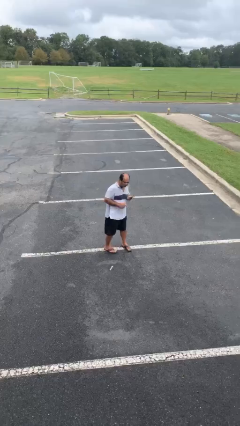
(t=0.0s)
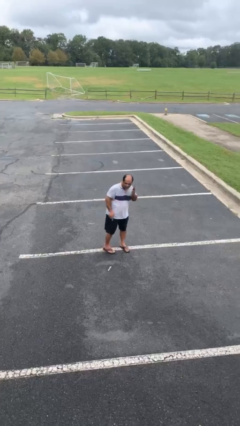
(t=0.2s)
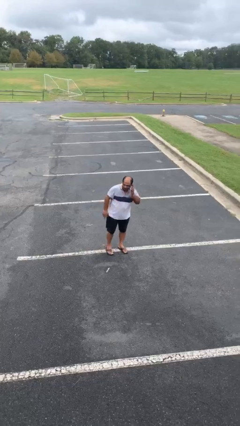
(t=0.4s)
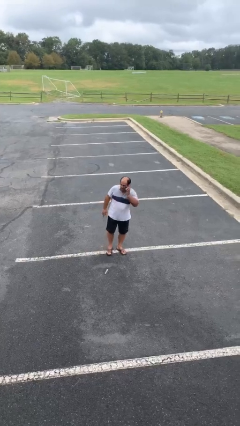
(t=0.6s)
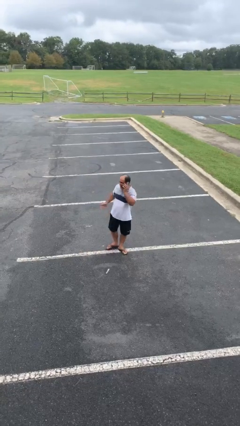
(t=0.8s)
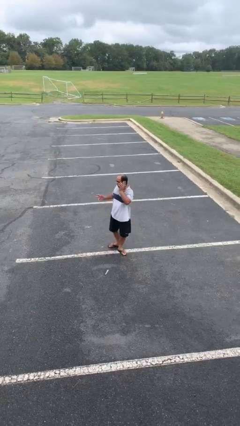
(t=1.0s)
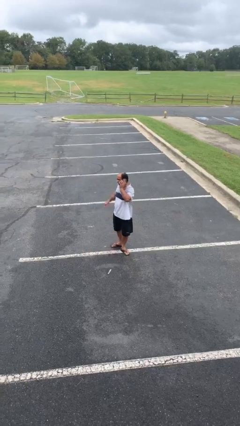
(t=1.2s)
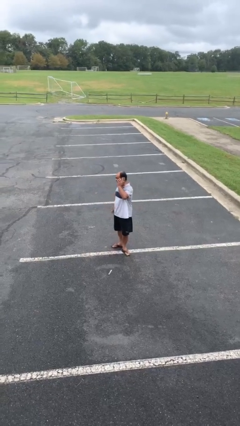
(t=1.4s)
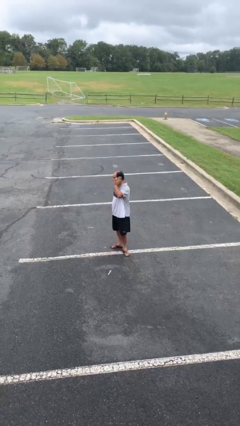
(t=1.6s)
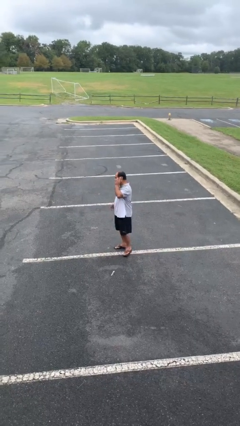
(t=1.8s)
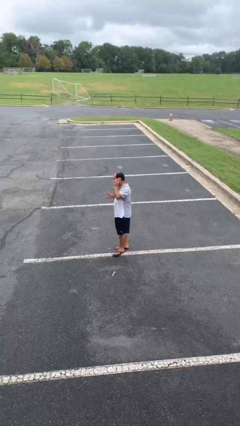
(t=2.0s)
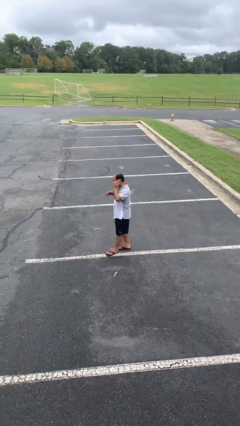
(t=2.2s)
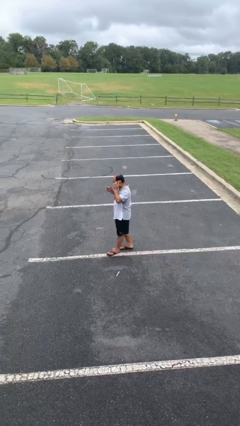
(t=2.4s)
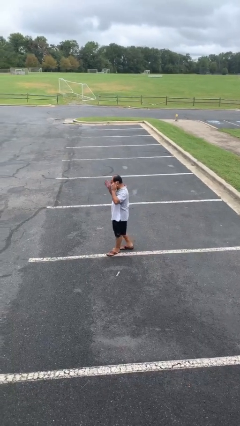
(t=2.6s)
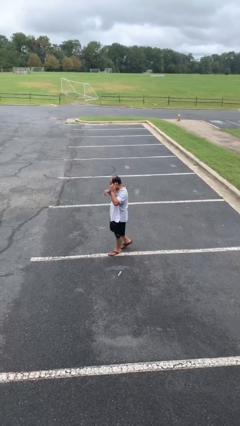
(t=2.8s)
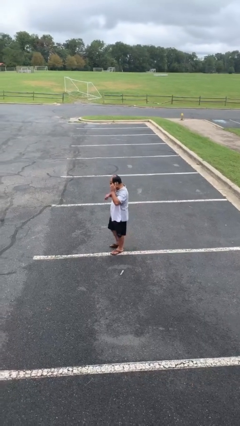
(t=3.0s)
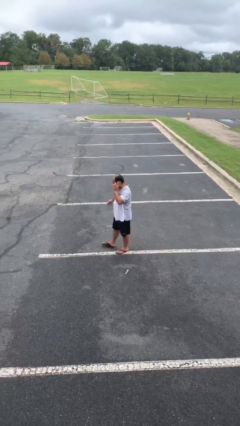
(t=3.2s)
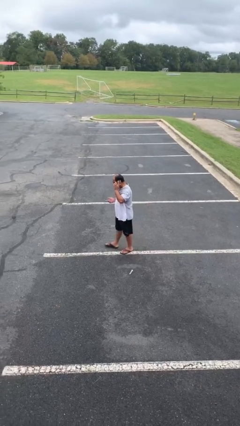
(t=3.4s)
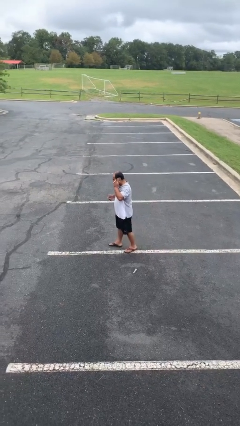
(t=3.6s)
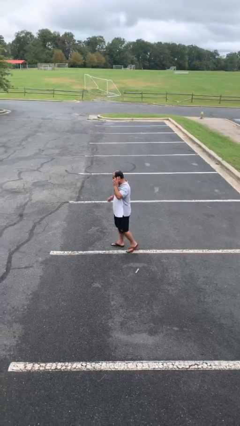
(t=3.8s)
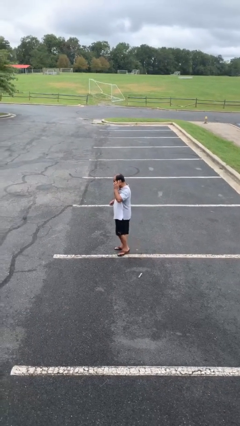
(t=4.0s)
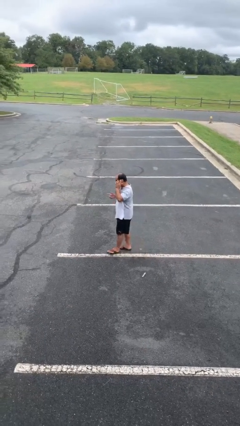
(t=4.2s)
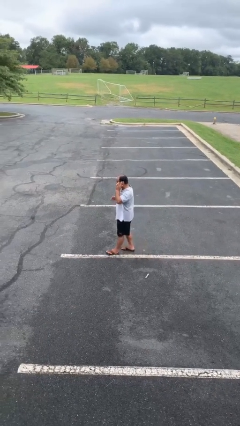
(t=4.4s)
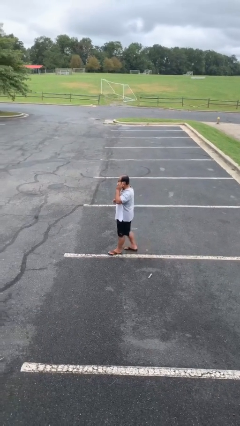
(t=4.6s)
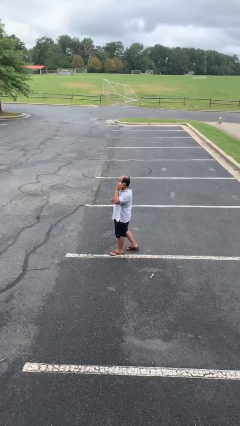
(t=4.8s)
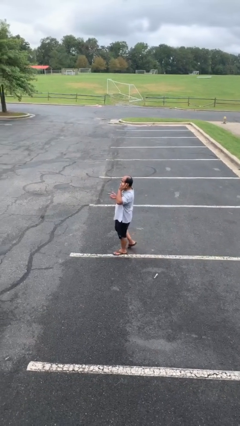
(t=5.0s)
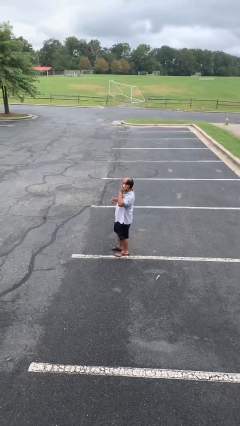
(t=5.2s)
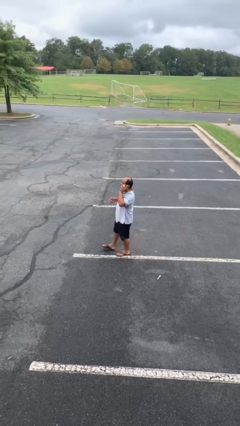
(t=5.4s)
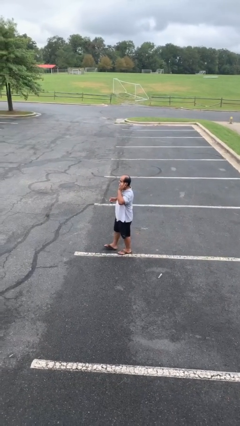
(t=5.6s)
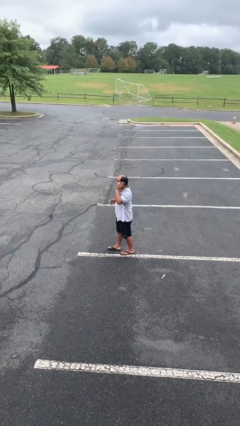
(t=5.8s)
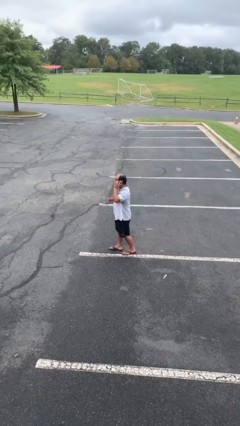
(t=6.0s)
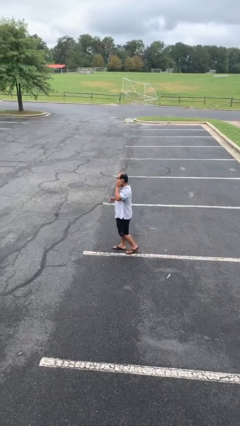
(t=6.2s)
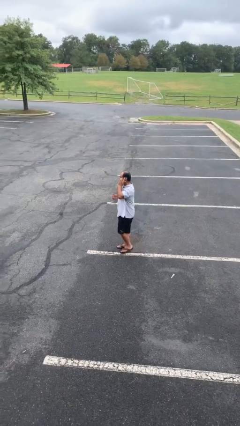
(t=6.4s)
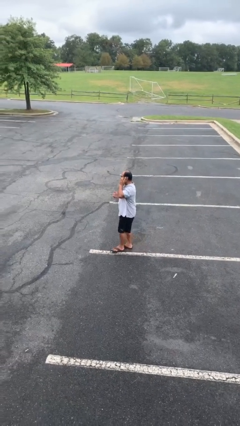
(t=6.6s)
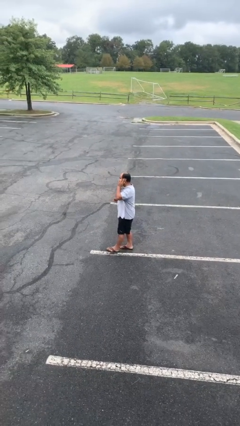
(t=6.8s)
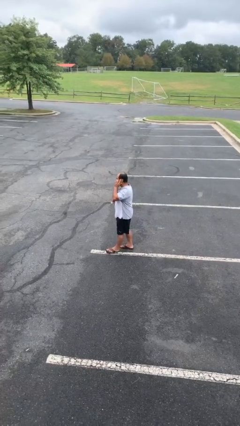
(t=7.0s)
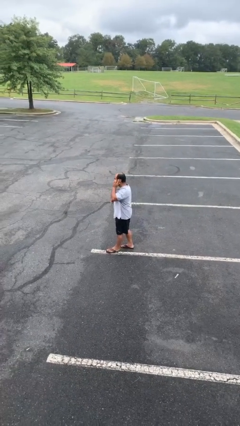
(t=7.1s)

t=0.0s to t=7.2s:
person talks on phone

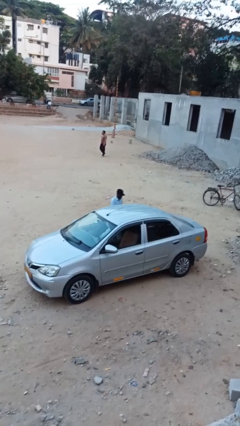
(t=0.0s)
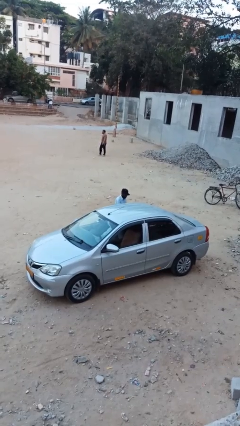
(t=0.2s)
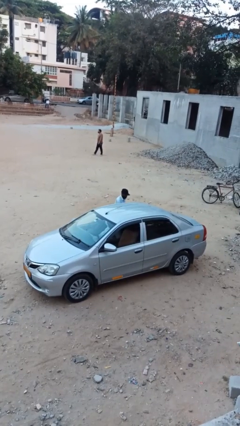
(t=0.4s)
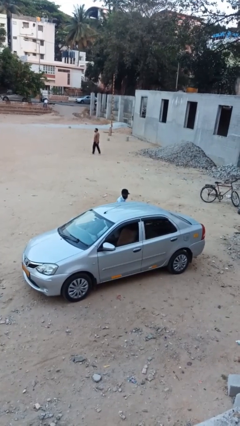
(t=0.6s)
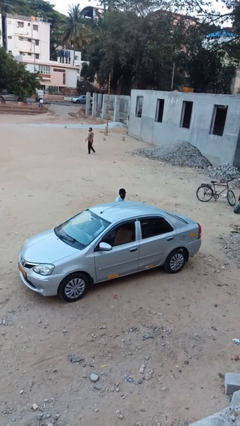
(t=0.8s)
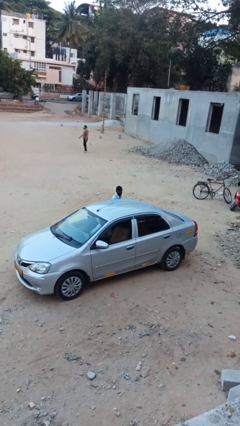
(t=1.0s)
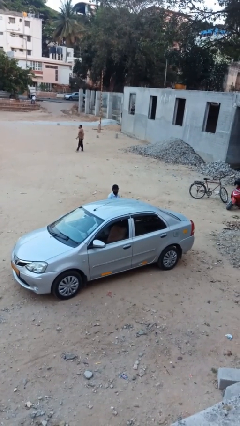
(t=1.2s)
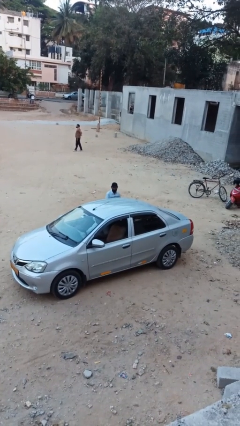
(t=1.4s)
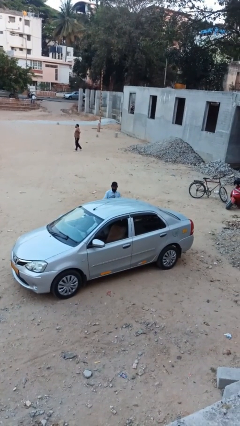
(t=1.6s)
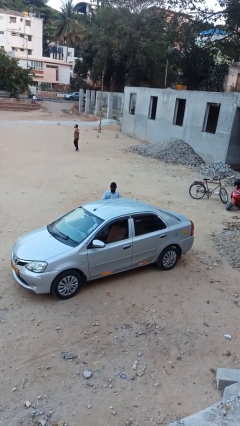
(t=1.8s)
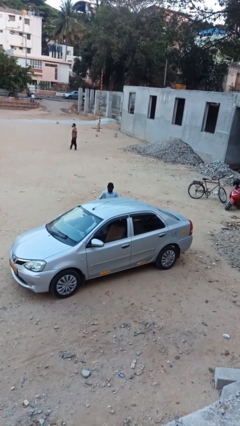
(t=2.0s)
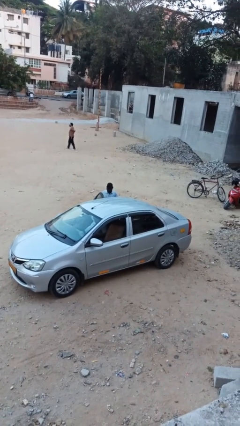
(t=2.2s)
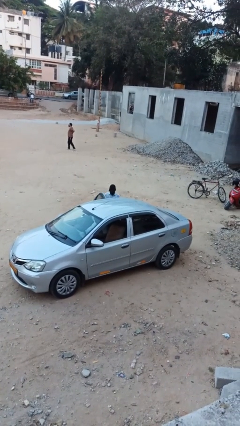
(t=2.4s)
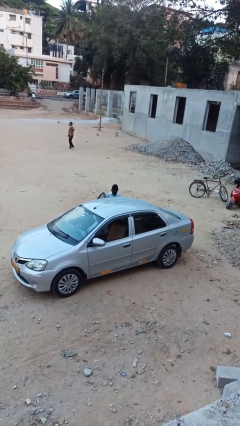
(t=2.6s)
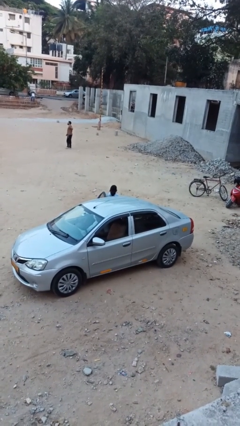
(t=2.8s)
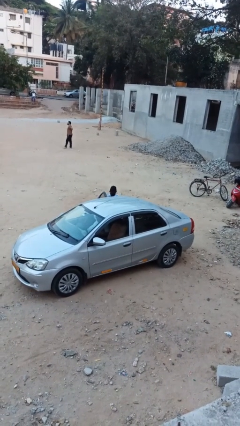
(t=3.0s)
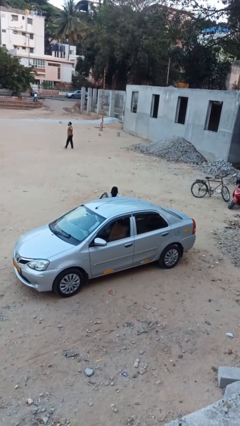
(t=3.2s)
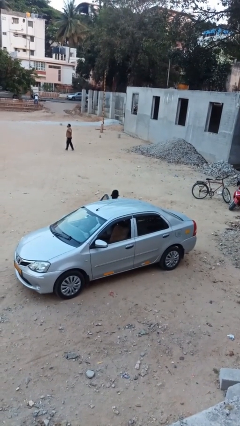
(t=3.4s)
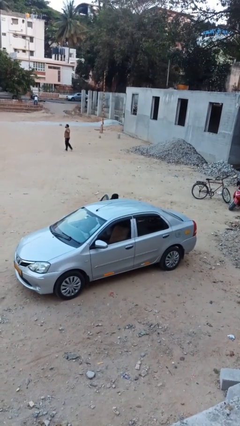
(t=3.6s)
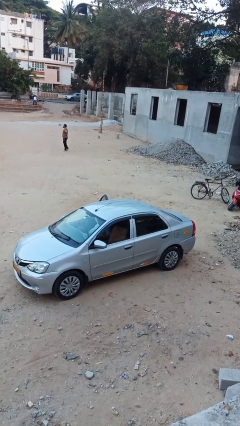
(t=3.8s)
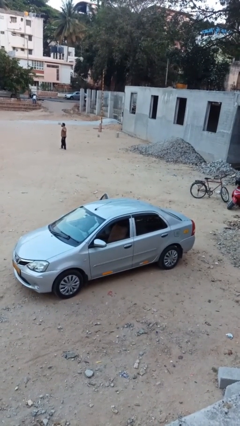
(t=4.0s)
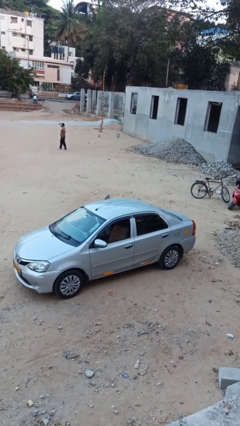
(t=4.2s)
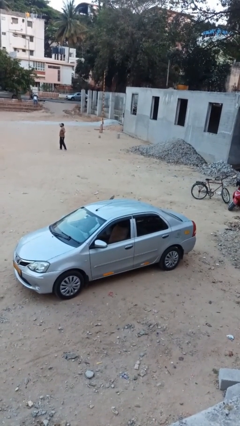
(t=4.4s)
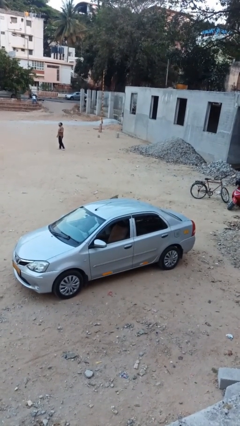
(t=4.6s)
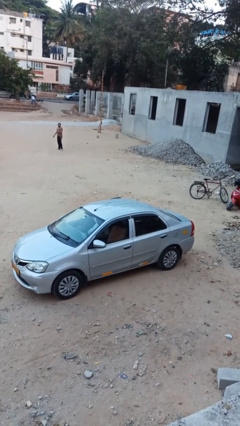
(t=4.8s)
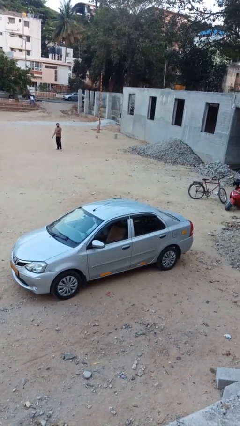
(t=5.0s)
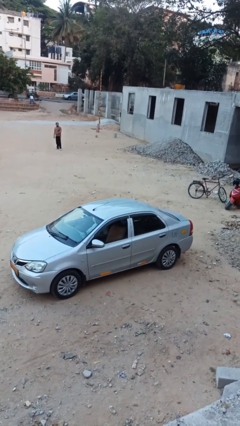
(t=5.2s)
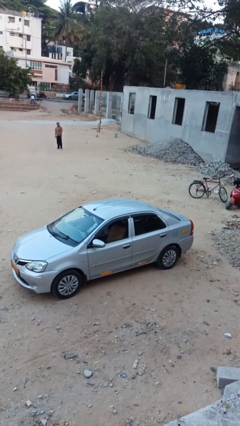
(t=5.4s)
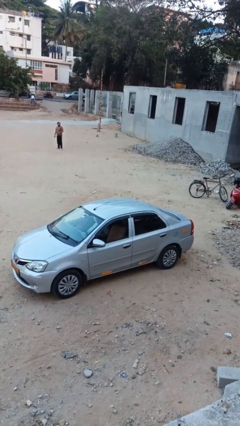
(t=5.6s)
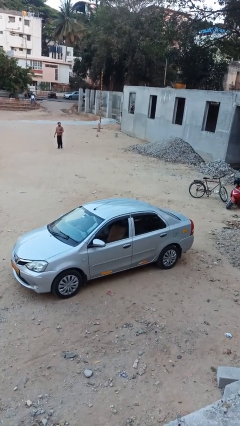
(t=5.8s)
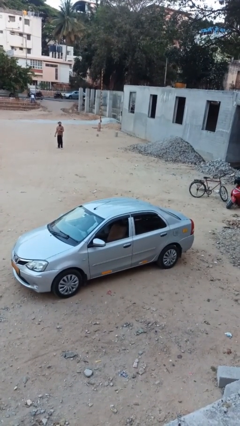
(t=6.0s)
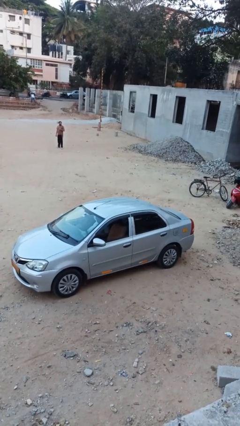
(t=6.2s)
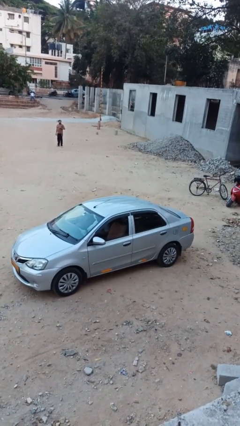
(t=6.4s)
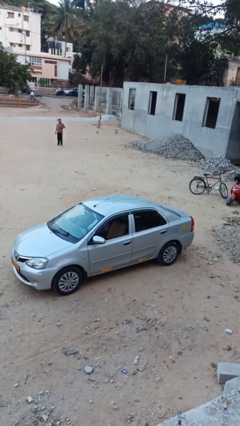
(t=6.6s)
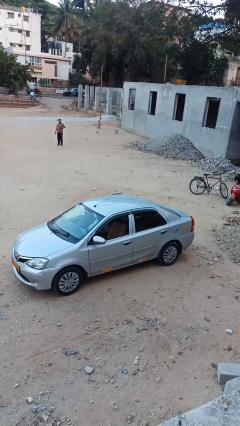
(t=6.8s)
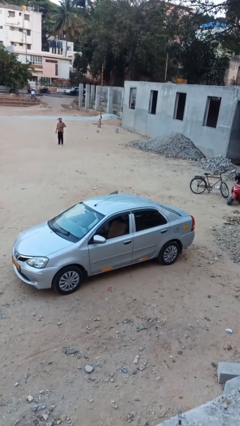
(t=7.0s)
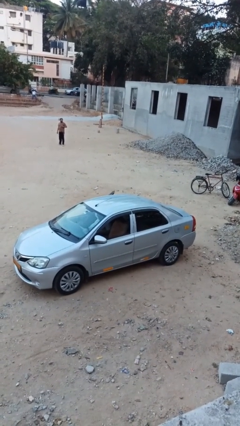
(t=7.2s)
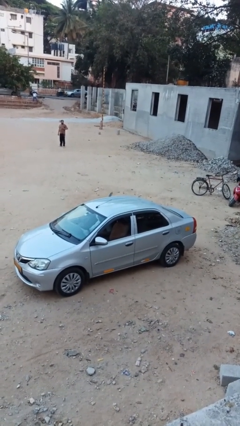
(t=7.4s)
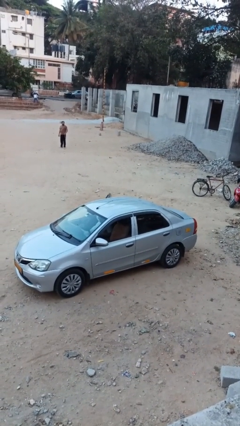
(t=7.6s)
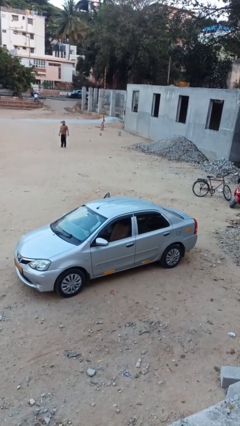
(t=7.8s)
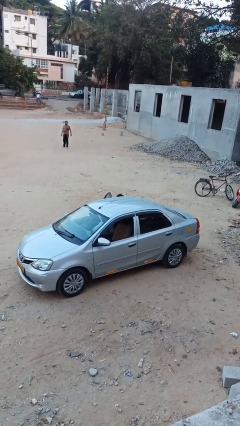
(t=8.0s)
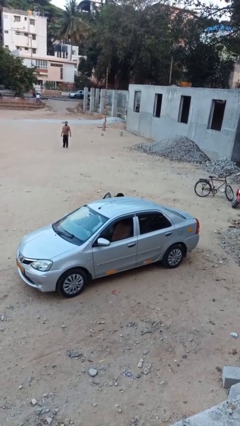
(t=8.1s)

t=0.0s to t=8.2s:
person enters car

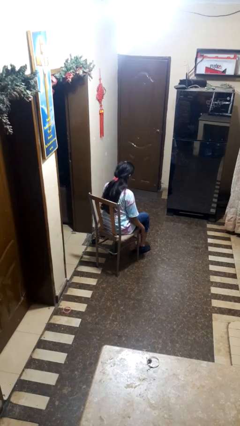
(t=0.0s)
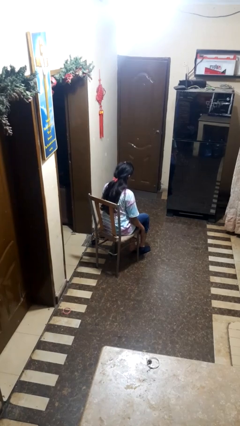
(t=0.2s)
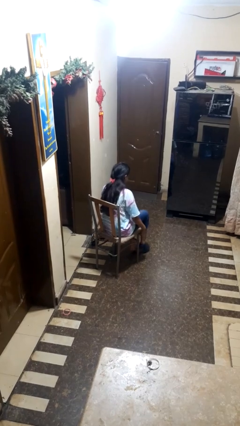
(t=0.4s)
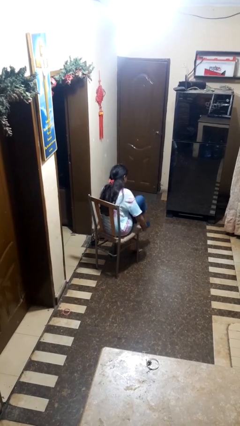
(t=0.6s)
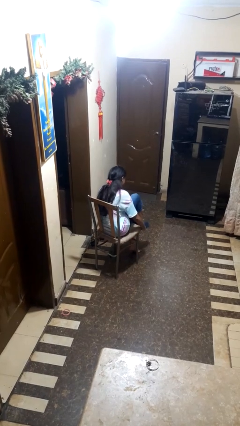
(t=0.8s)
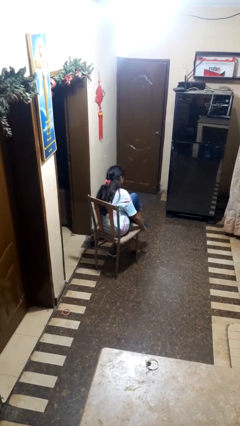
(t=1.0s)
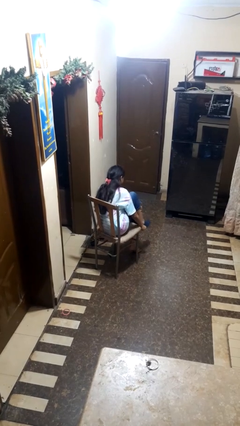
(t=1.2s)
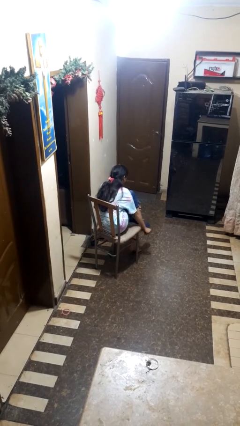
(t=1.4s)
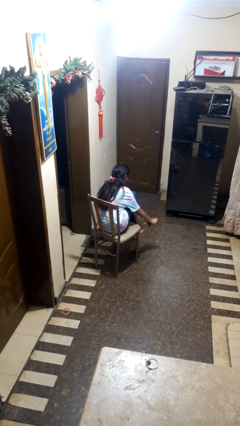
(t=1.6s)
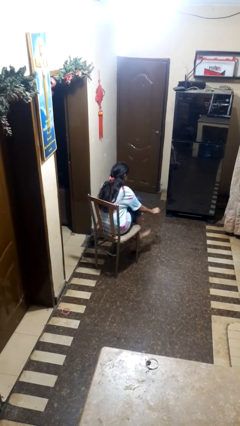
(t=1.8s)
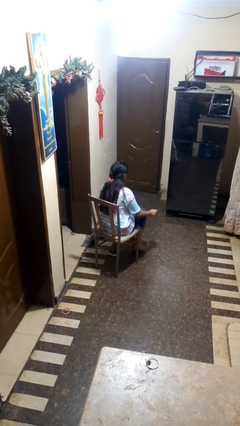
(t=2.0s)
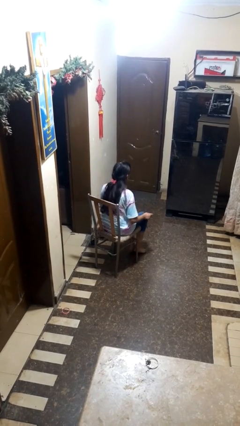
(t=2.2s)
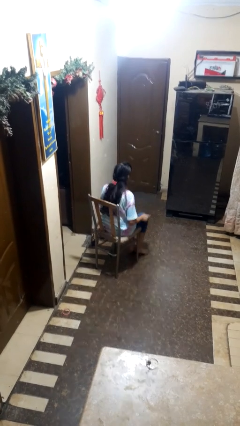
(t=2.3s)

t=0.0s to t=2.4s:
person takes off socks

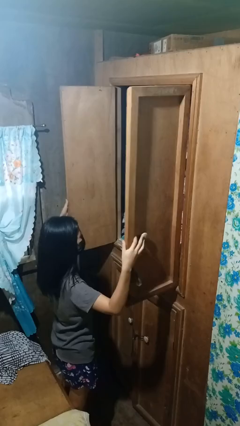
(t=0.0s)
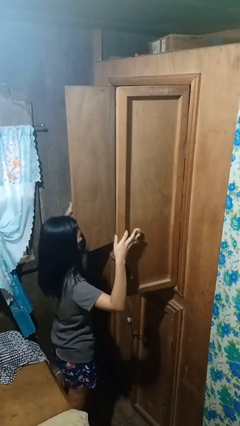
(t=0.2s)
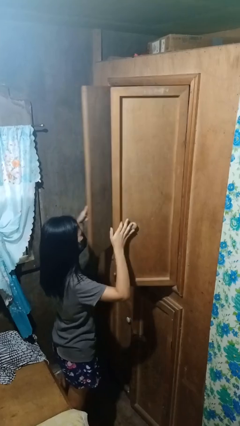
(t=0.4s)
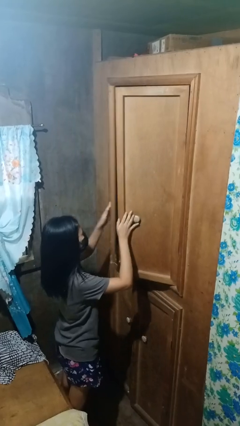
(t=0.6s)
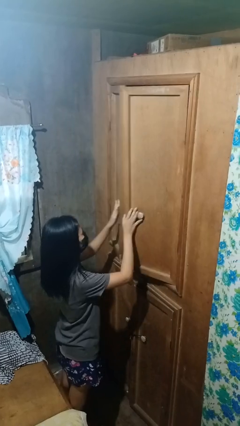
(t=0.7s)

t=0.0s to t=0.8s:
person closes closet door
